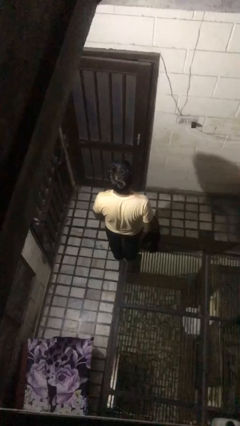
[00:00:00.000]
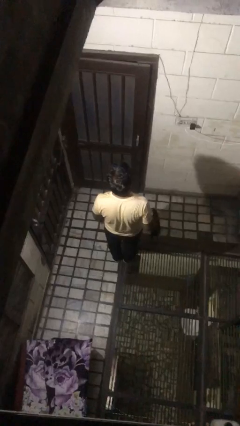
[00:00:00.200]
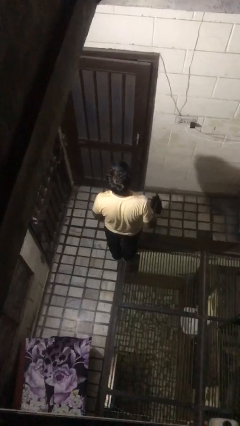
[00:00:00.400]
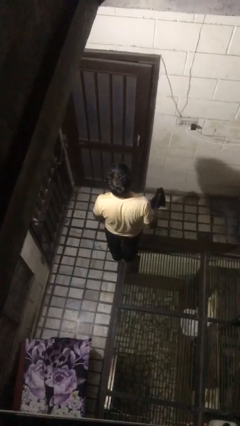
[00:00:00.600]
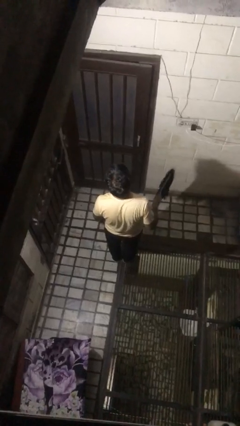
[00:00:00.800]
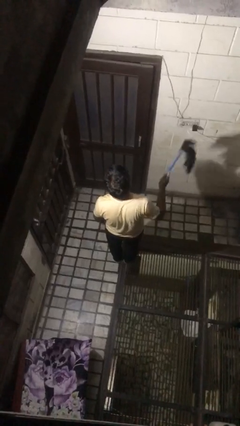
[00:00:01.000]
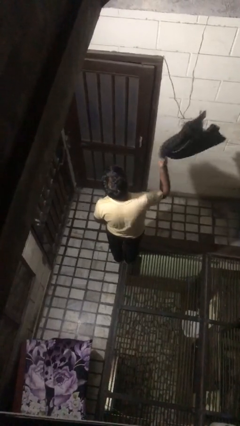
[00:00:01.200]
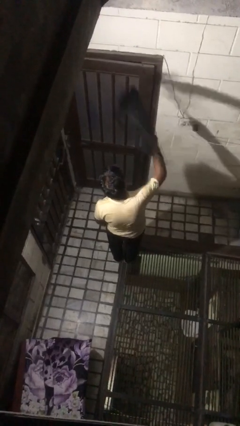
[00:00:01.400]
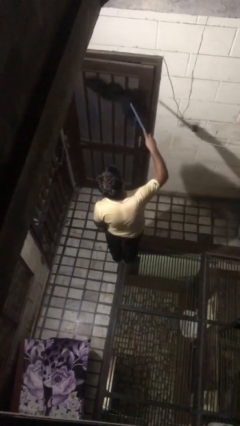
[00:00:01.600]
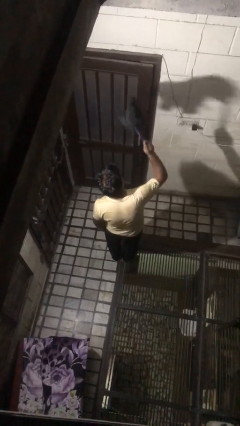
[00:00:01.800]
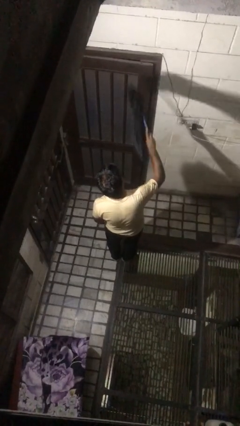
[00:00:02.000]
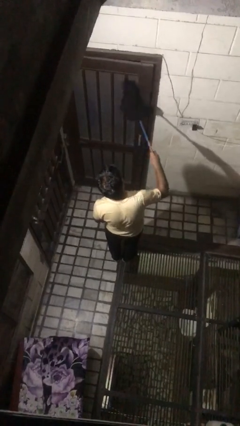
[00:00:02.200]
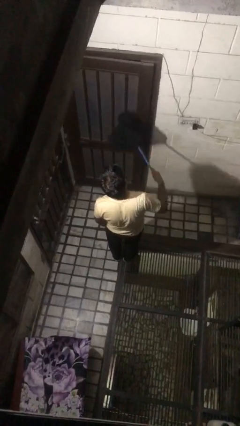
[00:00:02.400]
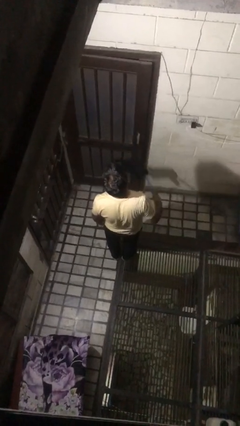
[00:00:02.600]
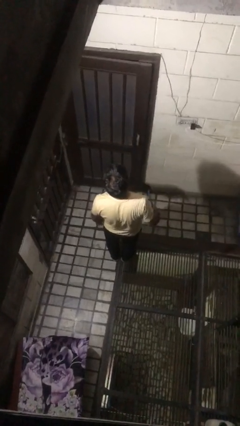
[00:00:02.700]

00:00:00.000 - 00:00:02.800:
person dusts furniture

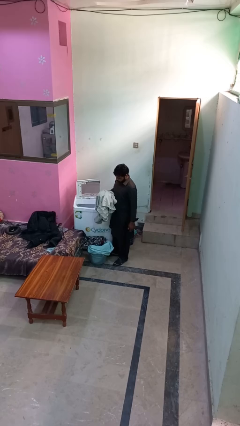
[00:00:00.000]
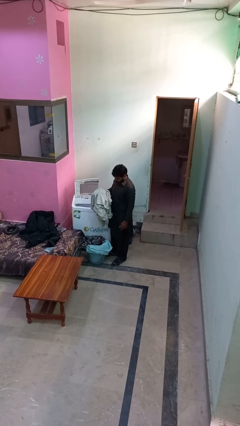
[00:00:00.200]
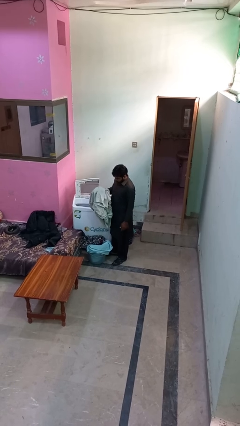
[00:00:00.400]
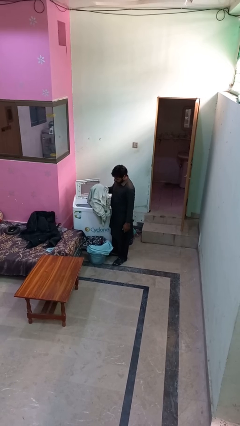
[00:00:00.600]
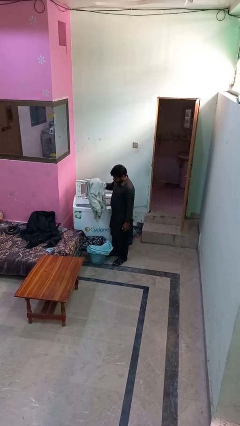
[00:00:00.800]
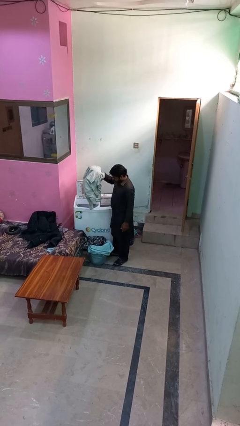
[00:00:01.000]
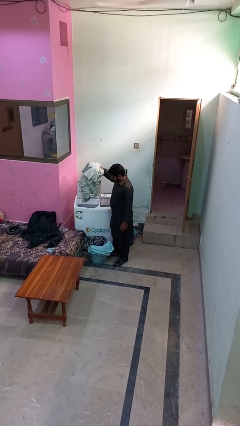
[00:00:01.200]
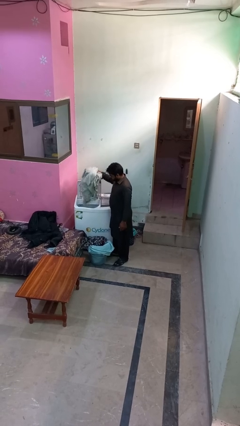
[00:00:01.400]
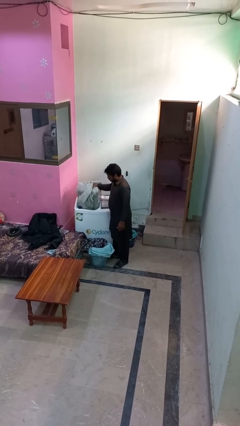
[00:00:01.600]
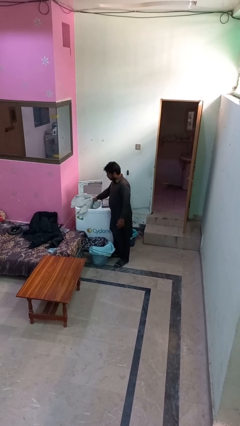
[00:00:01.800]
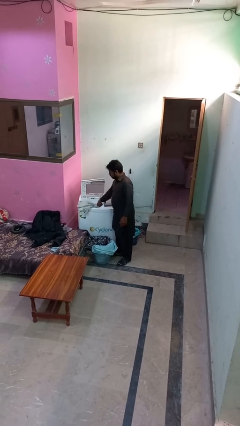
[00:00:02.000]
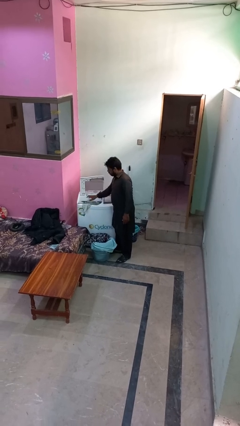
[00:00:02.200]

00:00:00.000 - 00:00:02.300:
person loads clotheswasher

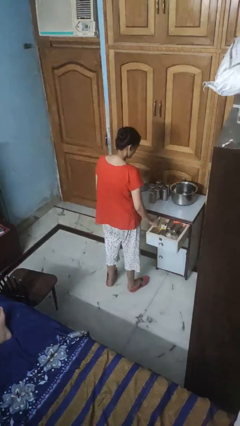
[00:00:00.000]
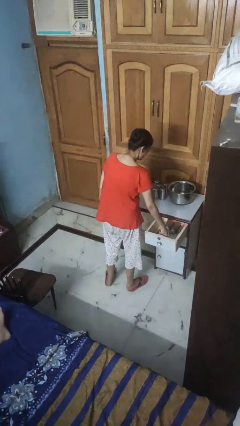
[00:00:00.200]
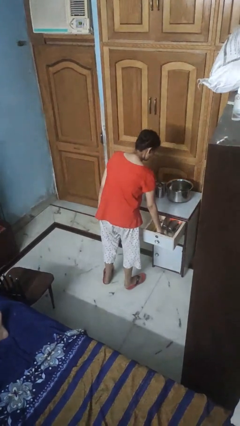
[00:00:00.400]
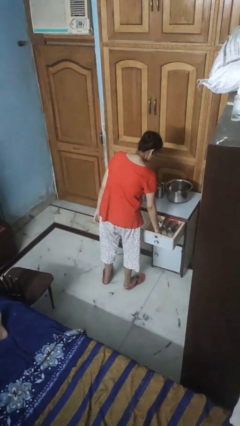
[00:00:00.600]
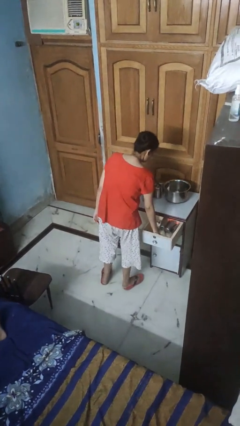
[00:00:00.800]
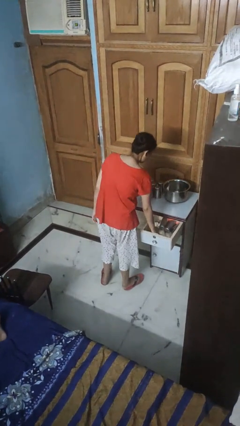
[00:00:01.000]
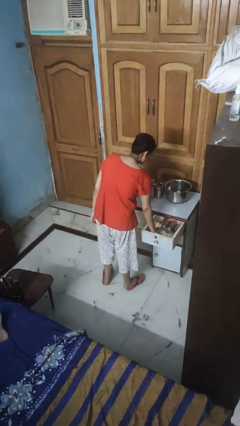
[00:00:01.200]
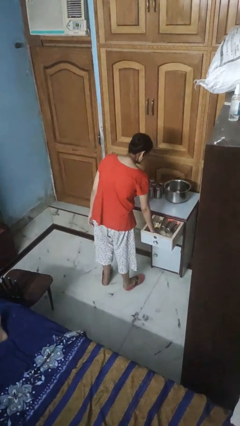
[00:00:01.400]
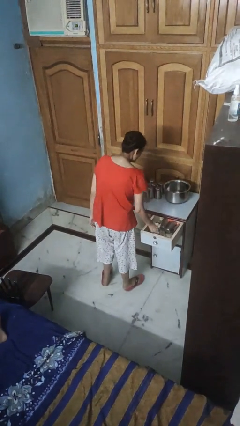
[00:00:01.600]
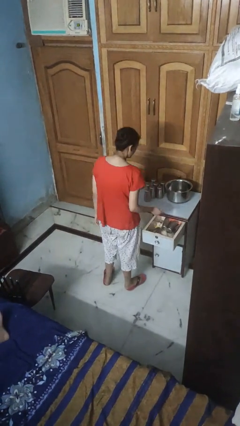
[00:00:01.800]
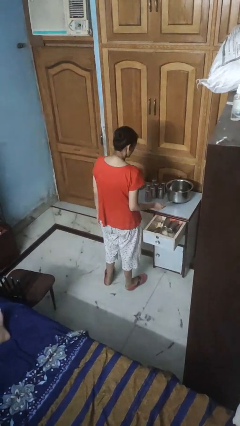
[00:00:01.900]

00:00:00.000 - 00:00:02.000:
person takes object from kitchen drawer

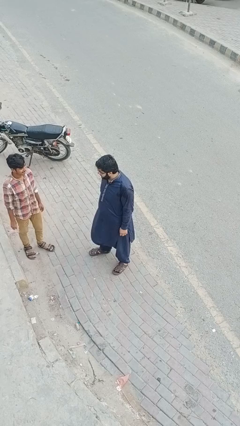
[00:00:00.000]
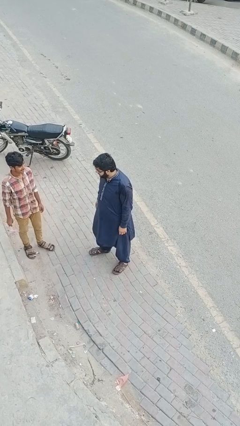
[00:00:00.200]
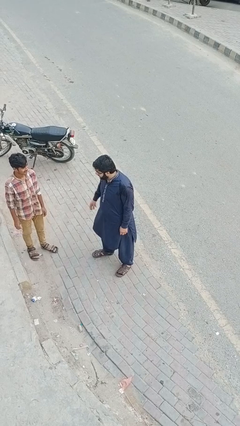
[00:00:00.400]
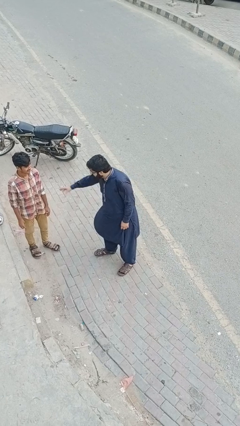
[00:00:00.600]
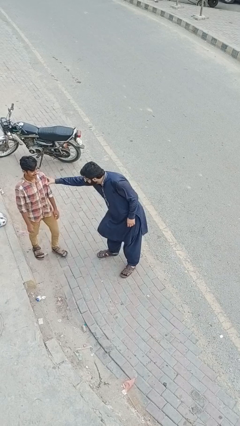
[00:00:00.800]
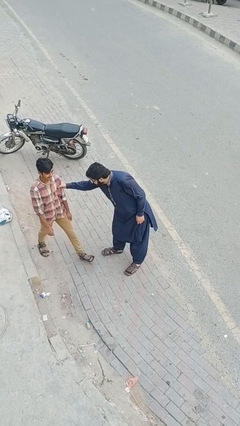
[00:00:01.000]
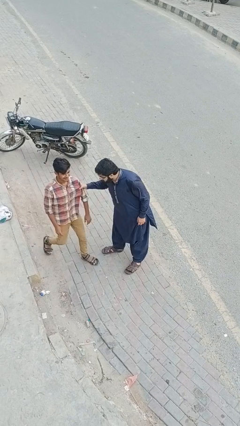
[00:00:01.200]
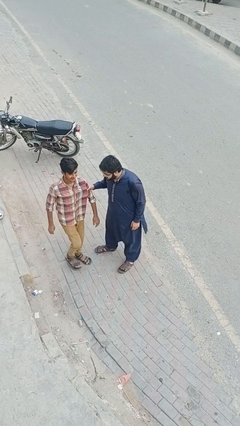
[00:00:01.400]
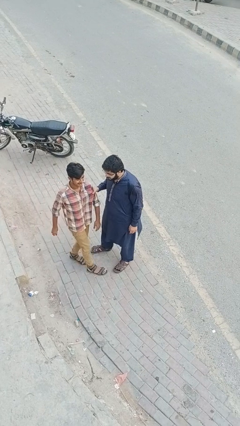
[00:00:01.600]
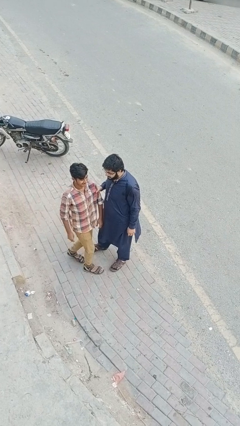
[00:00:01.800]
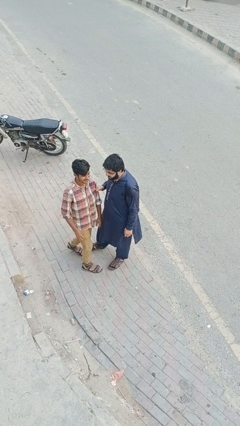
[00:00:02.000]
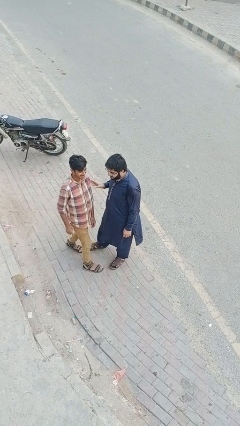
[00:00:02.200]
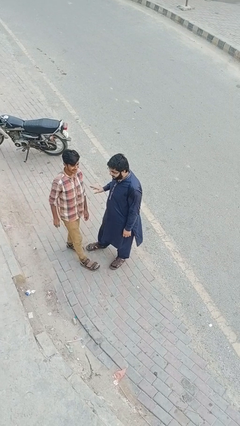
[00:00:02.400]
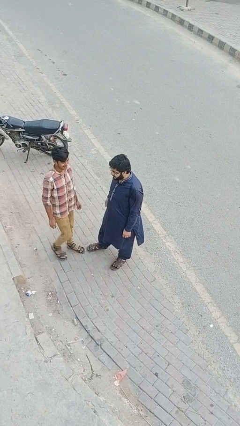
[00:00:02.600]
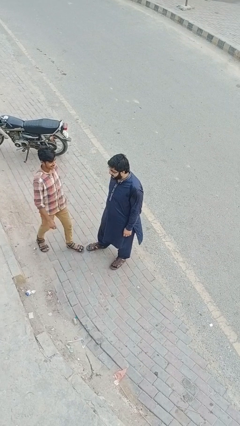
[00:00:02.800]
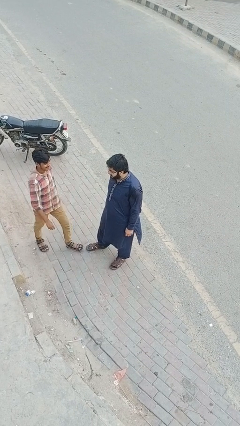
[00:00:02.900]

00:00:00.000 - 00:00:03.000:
person grabs person by bicep

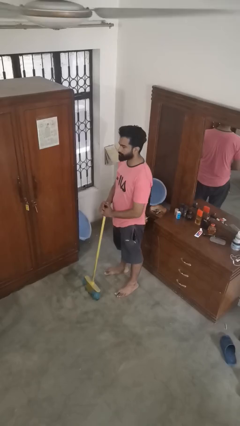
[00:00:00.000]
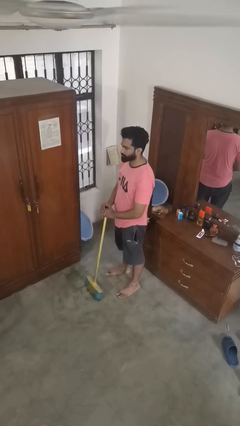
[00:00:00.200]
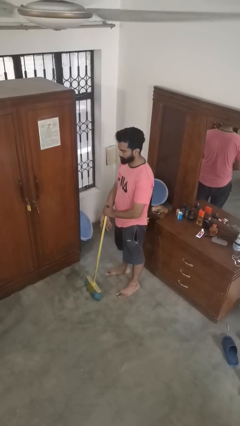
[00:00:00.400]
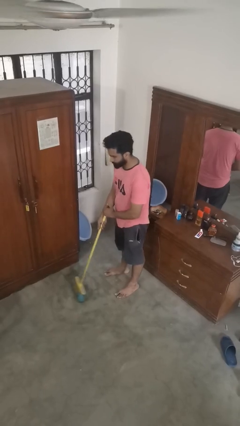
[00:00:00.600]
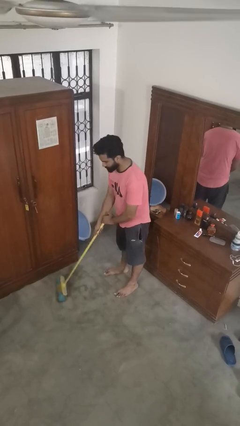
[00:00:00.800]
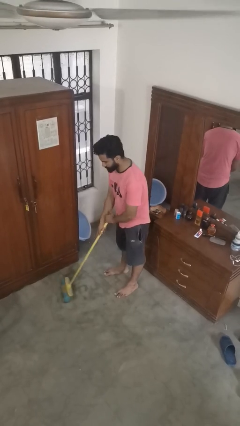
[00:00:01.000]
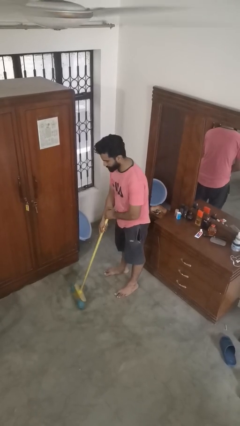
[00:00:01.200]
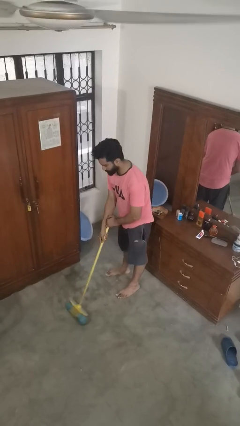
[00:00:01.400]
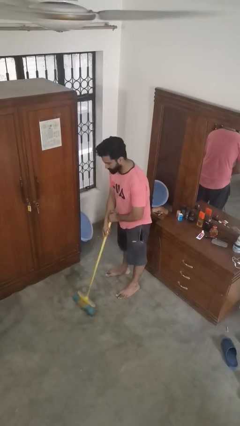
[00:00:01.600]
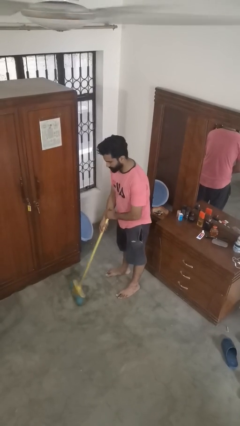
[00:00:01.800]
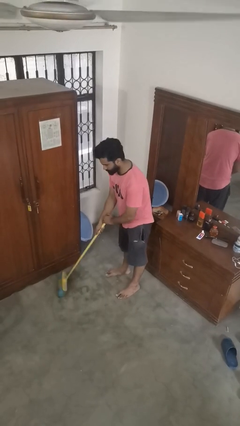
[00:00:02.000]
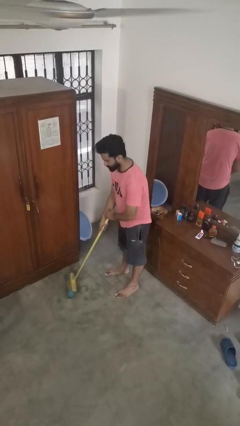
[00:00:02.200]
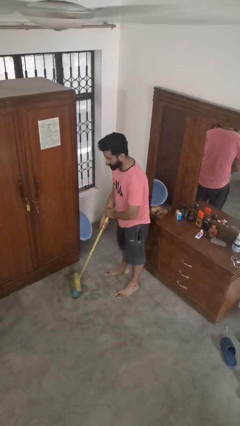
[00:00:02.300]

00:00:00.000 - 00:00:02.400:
person sweeps floor

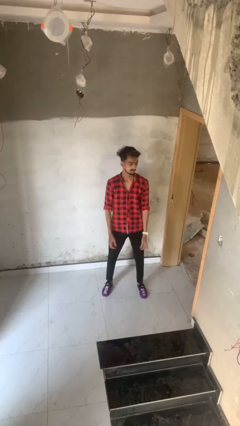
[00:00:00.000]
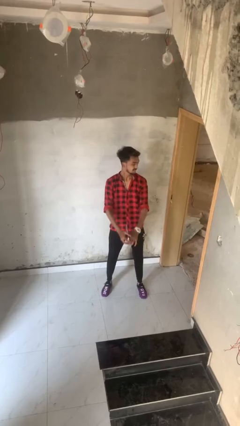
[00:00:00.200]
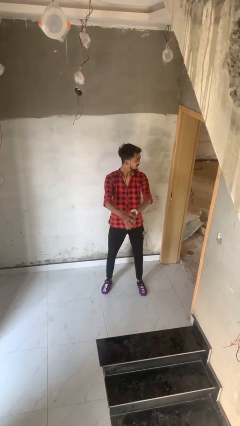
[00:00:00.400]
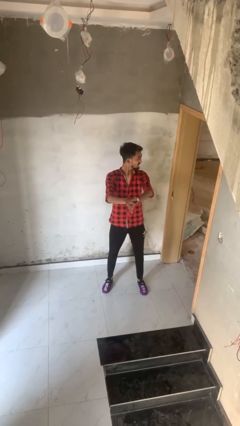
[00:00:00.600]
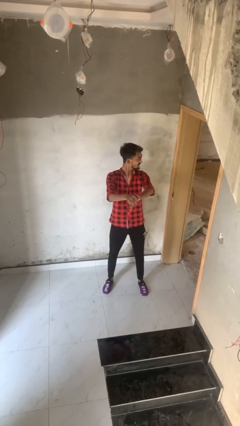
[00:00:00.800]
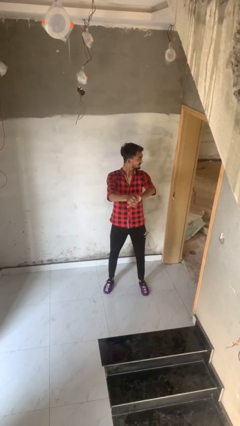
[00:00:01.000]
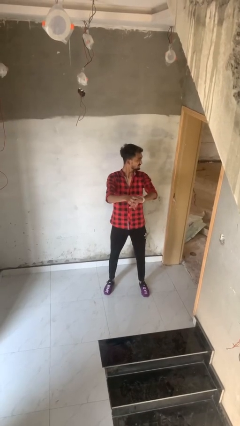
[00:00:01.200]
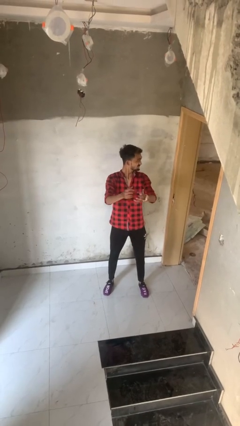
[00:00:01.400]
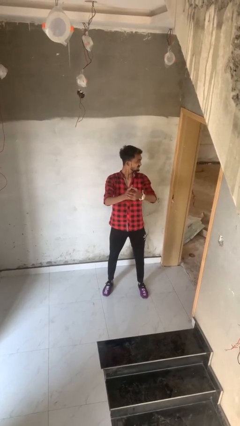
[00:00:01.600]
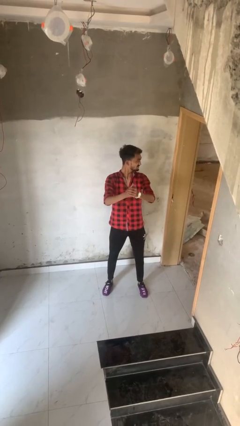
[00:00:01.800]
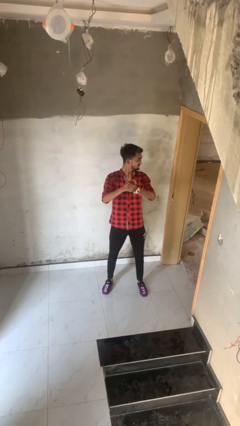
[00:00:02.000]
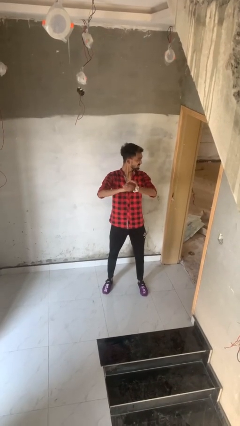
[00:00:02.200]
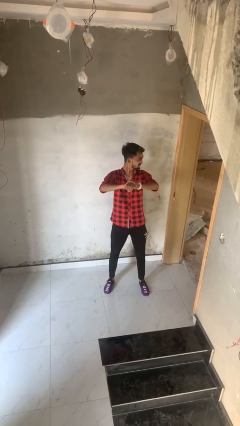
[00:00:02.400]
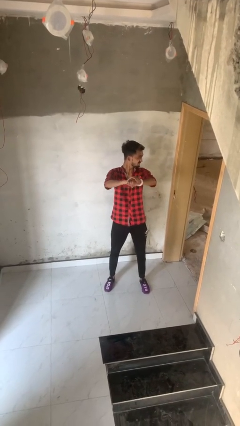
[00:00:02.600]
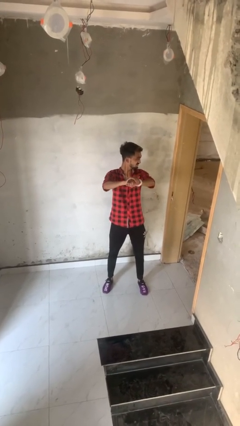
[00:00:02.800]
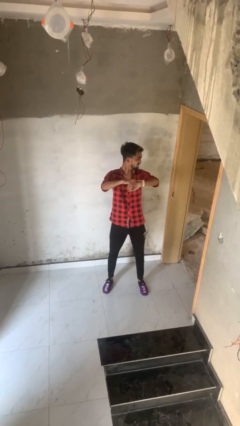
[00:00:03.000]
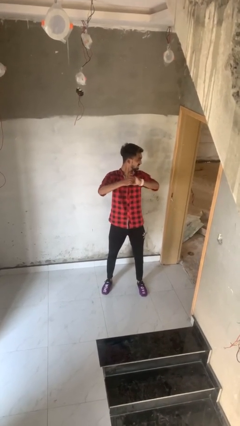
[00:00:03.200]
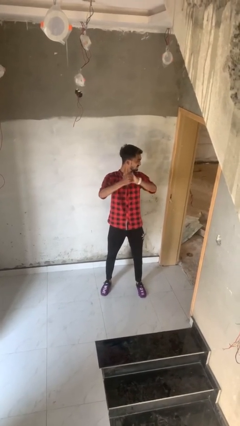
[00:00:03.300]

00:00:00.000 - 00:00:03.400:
person cracks knuckles

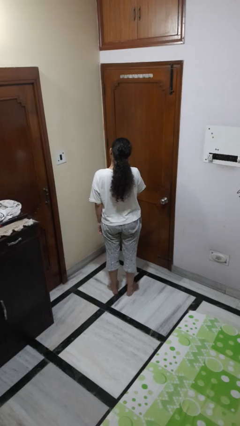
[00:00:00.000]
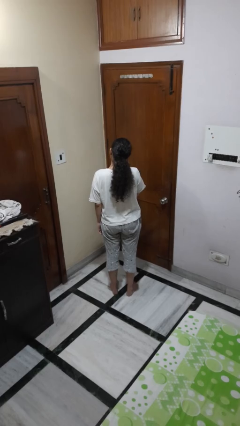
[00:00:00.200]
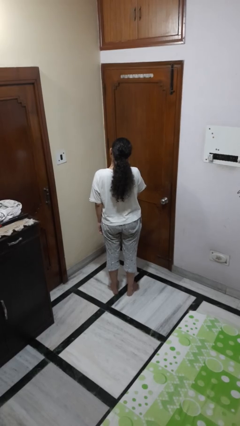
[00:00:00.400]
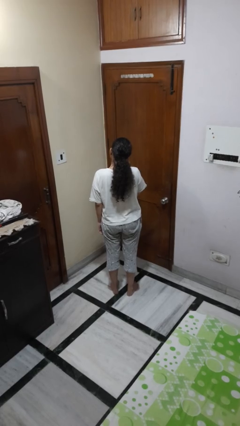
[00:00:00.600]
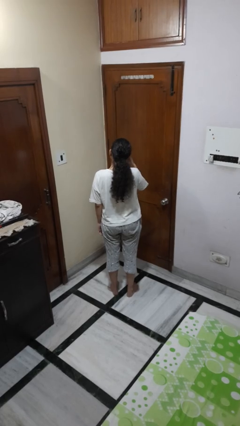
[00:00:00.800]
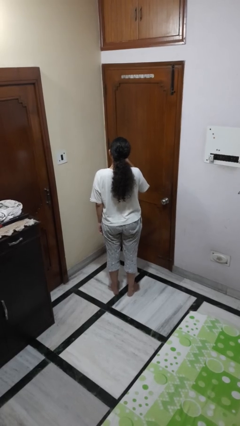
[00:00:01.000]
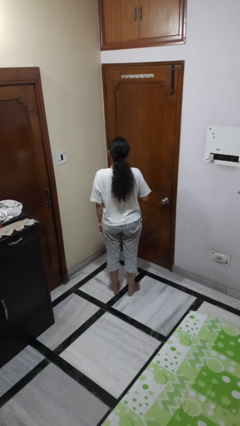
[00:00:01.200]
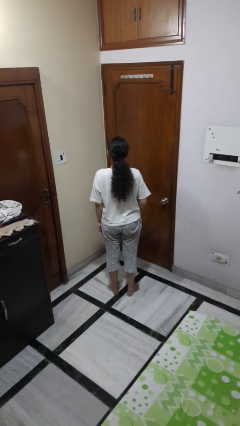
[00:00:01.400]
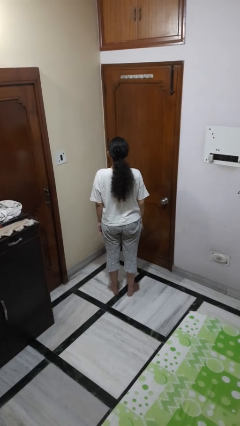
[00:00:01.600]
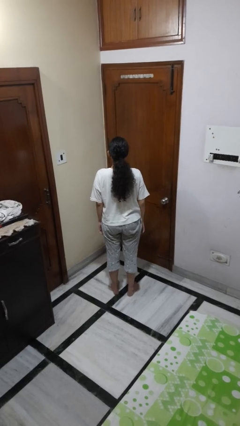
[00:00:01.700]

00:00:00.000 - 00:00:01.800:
person gestures call me
